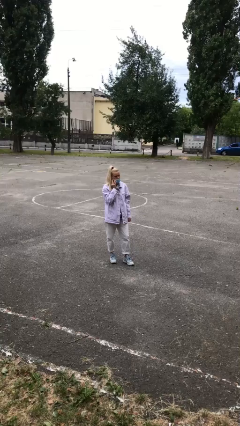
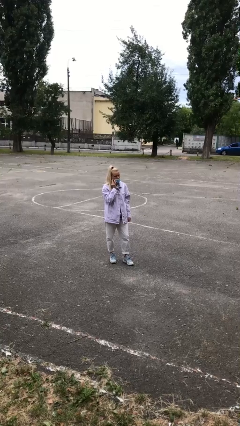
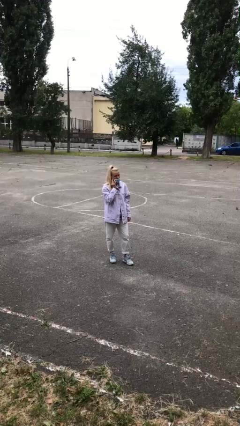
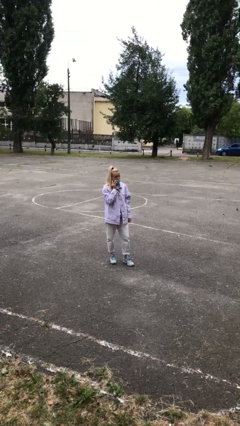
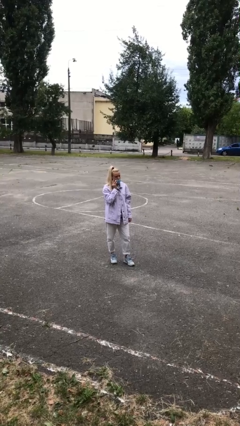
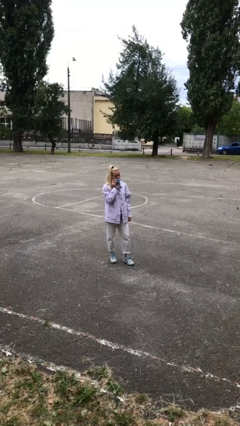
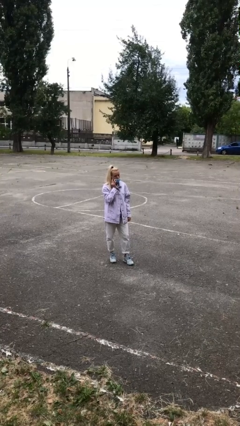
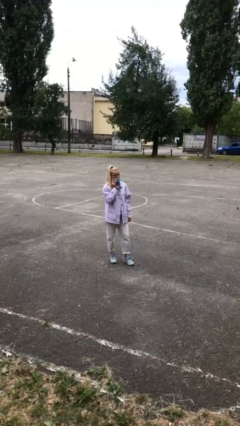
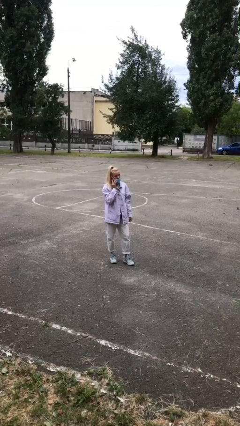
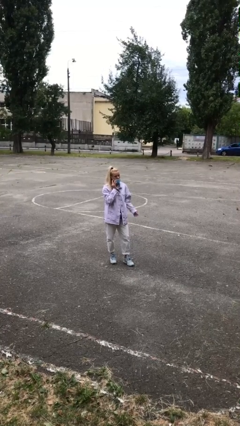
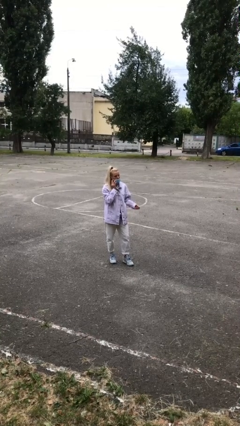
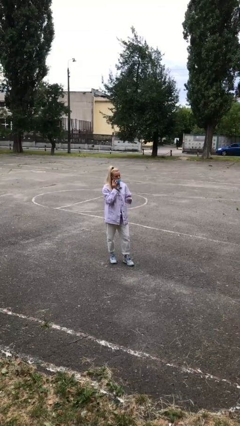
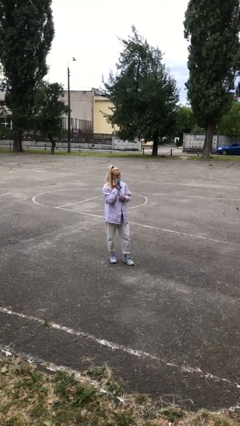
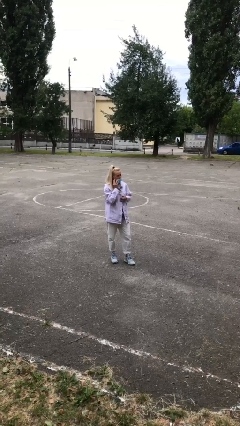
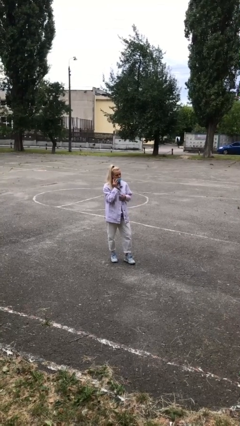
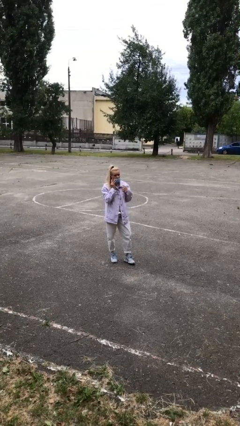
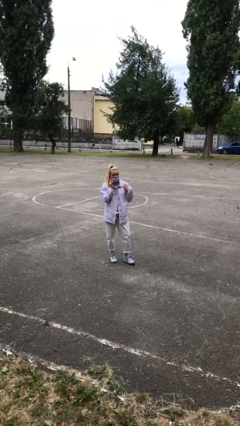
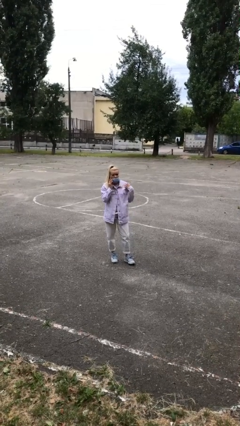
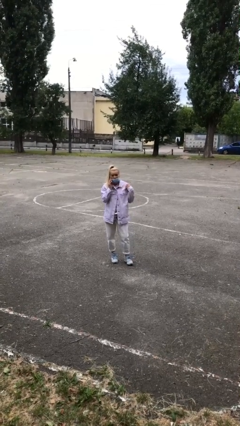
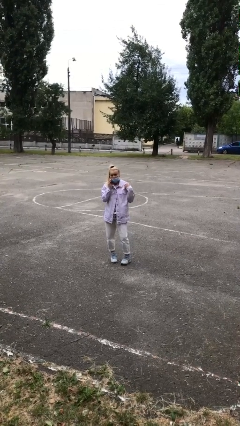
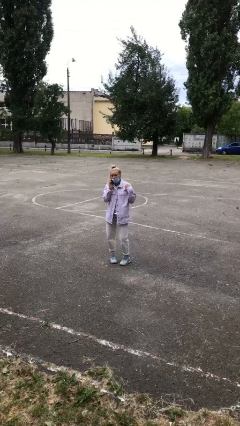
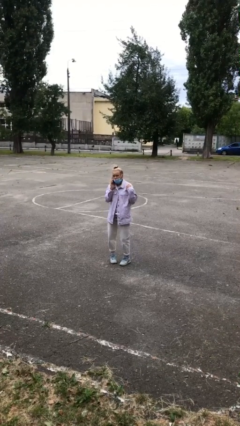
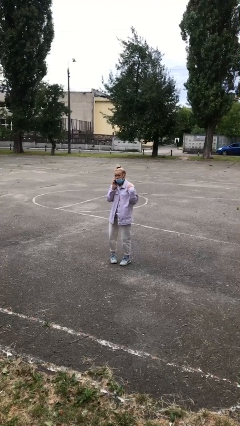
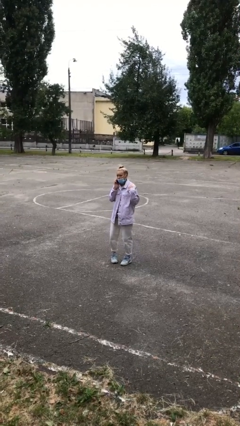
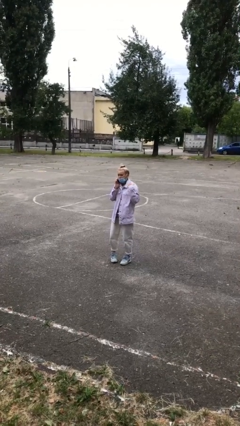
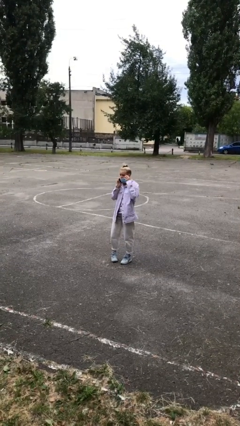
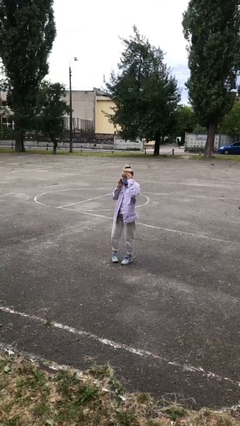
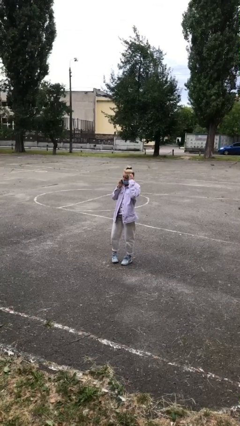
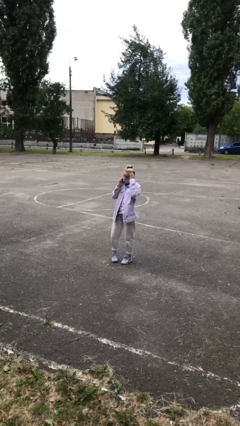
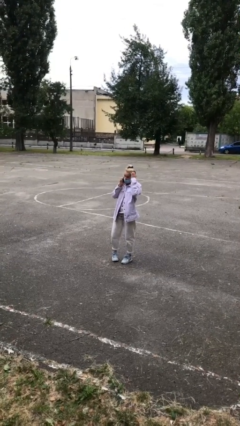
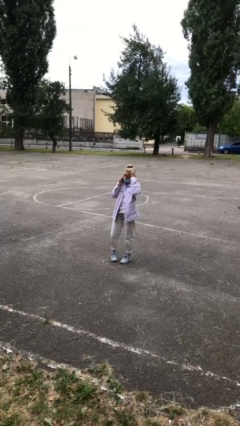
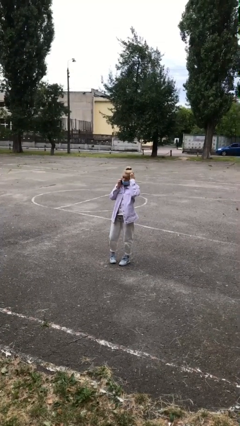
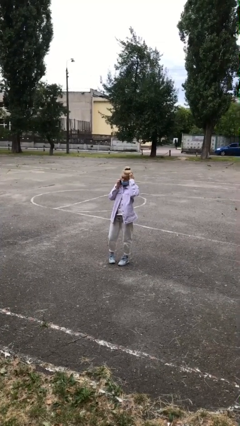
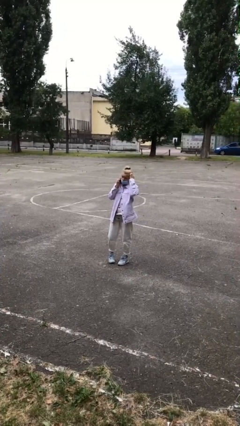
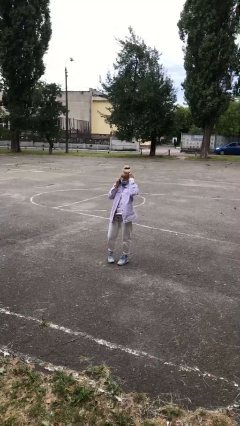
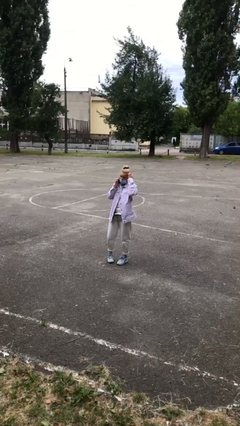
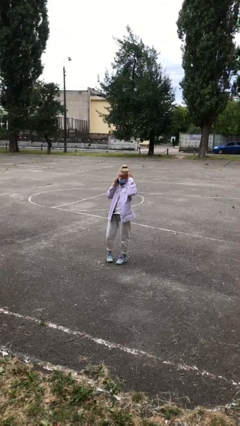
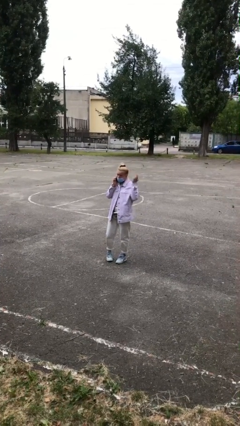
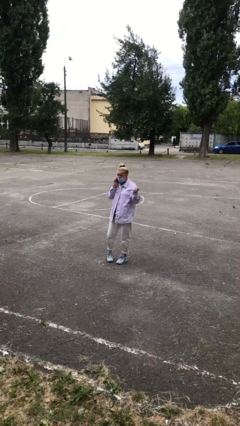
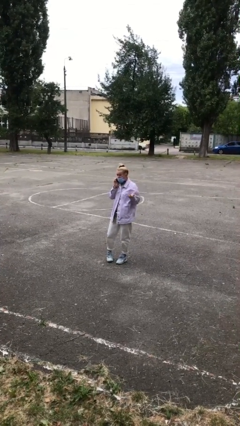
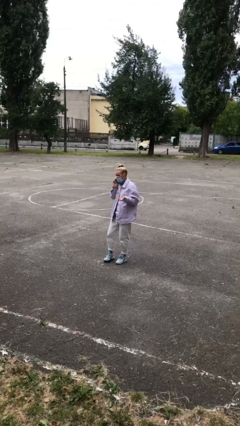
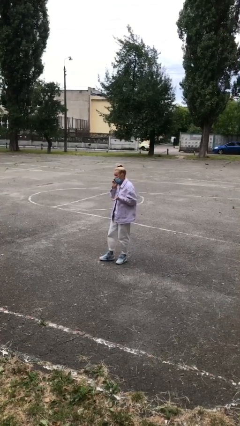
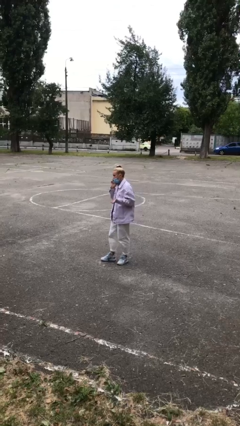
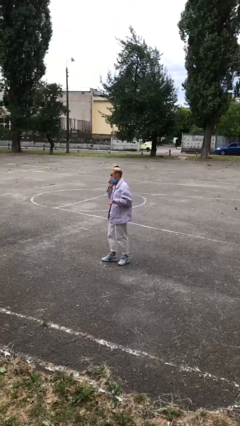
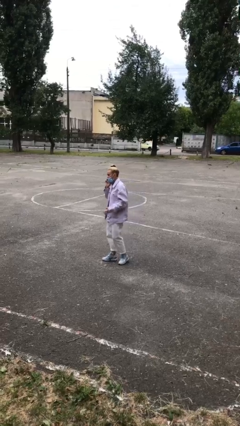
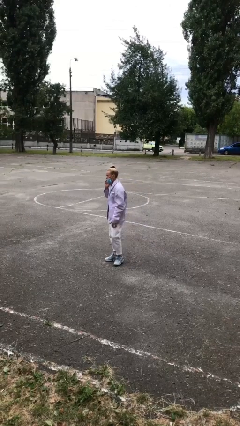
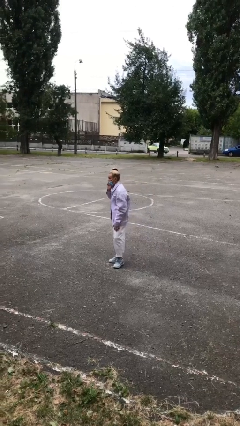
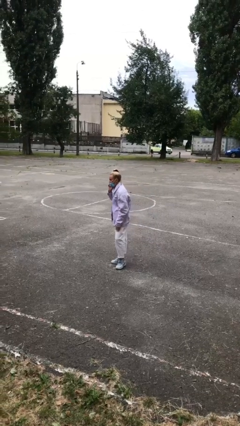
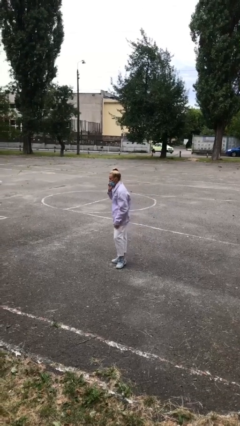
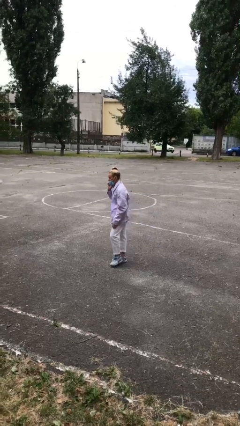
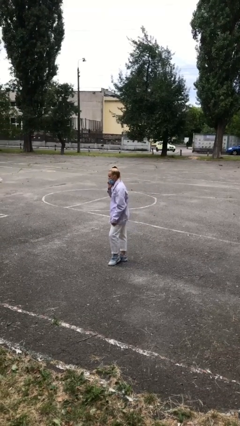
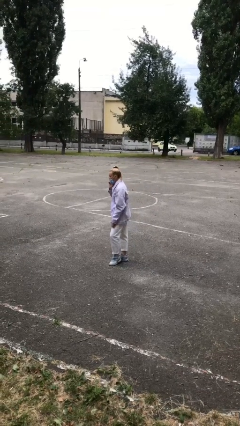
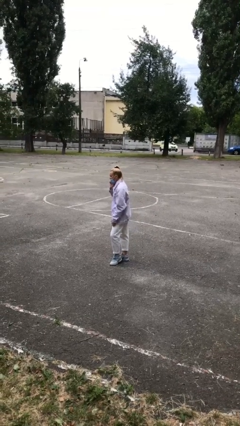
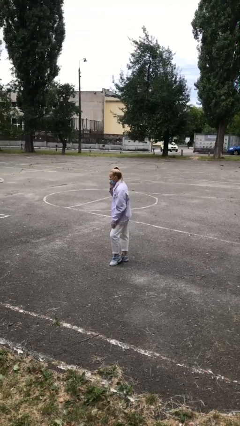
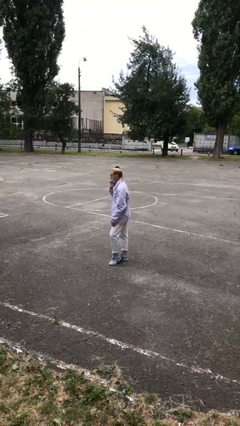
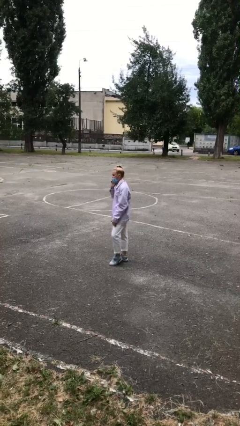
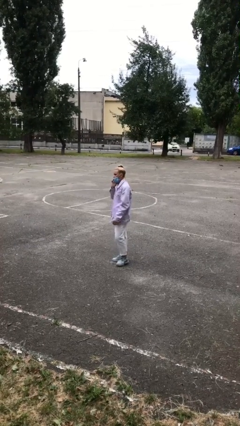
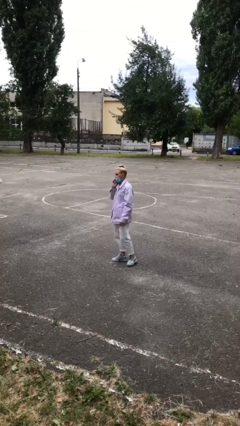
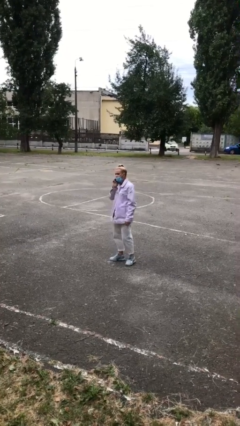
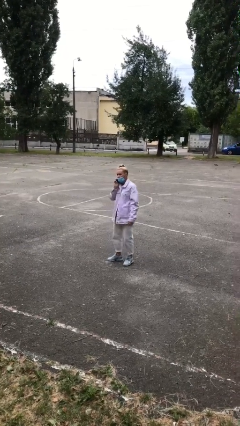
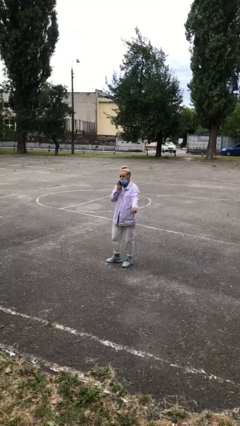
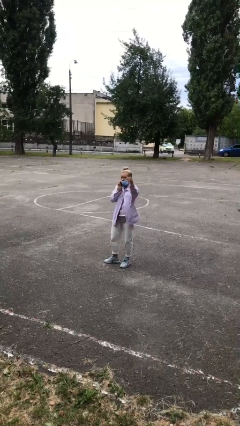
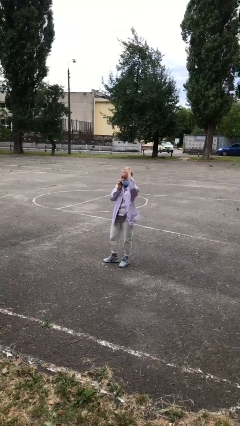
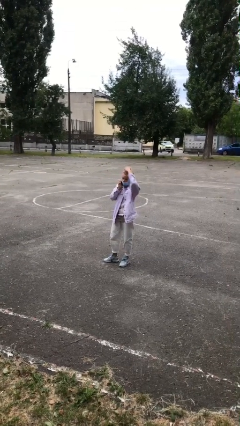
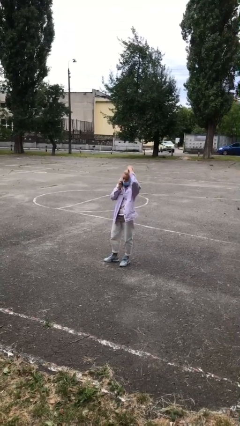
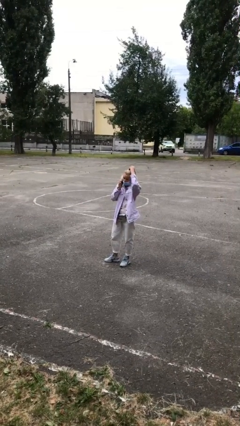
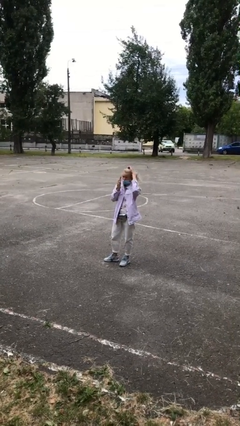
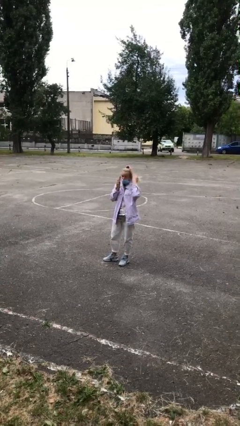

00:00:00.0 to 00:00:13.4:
person talks on phone

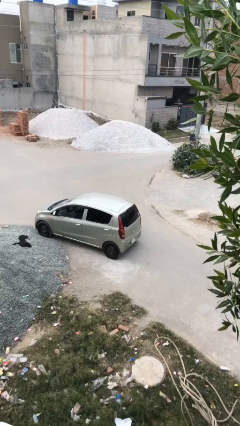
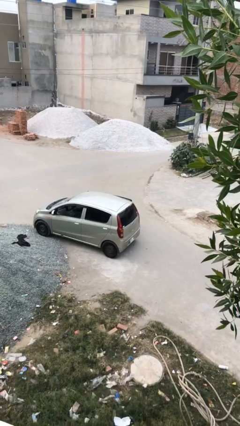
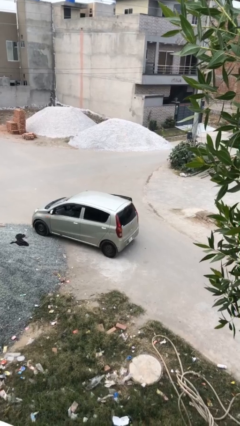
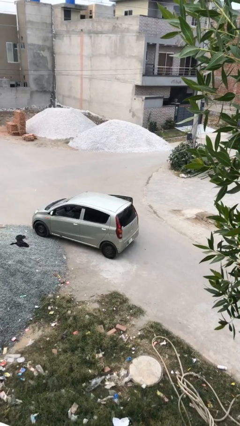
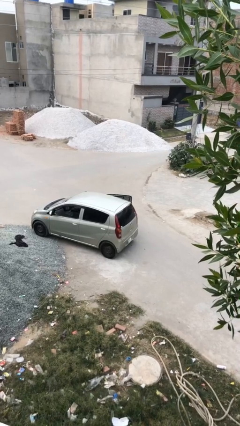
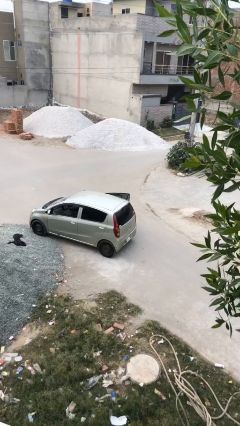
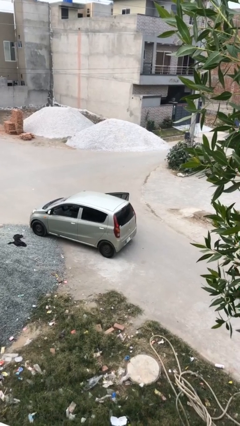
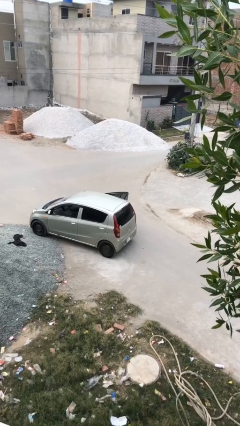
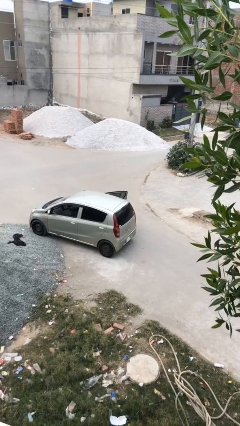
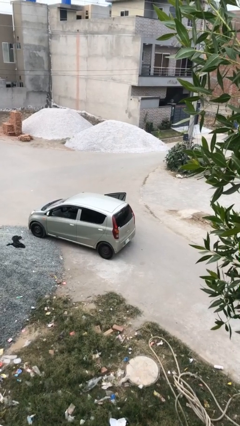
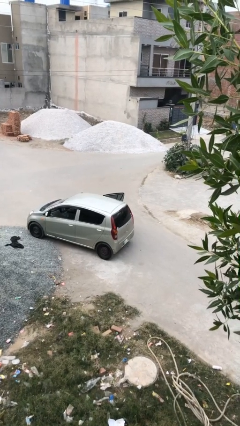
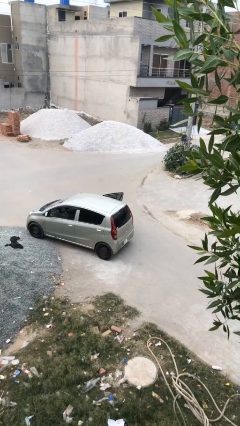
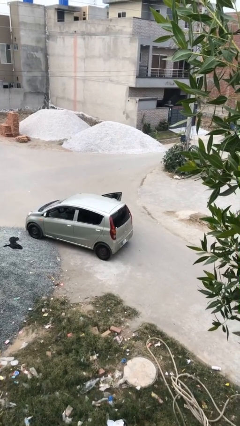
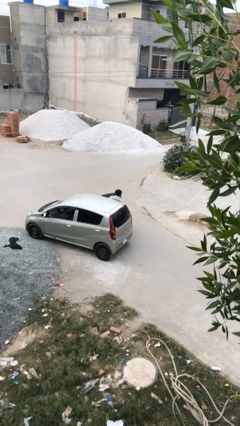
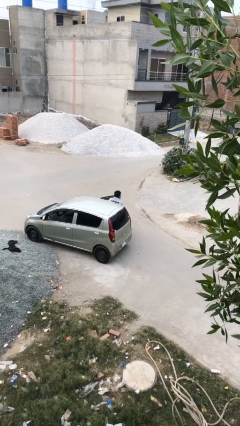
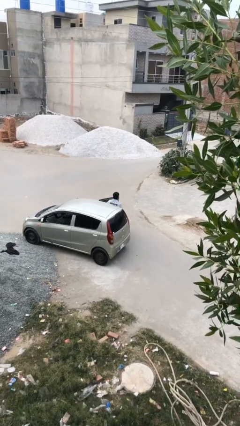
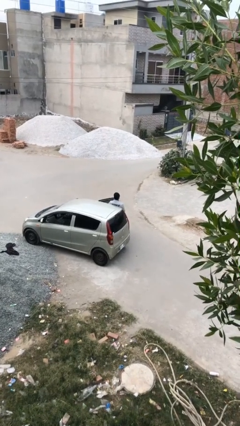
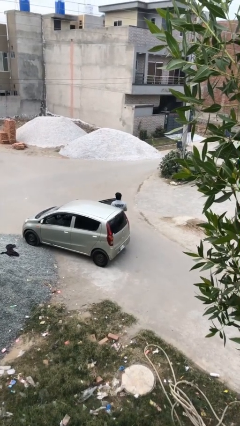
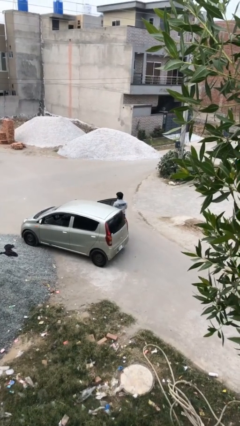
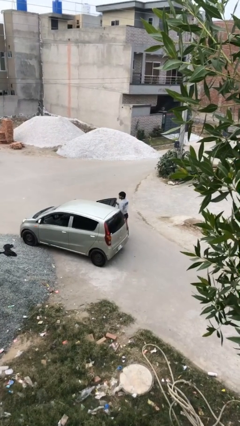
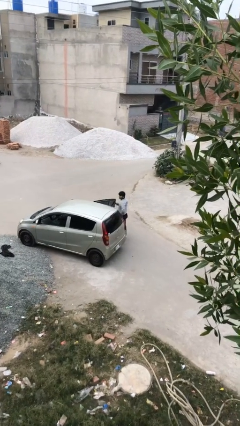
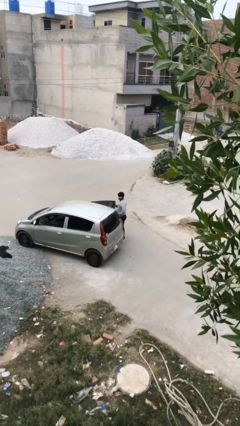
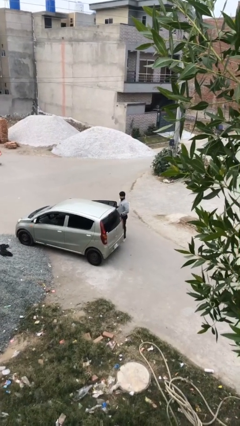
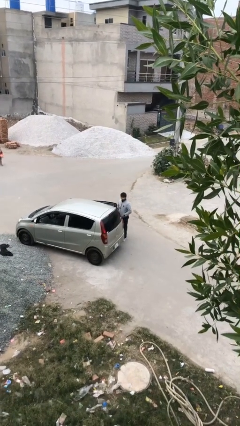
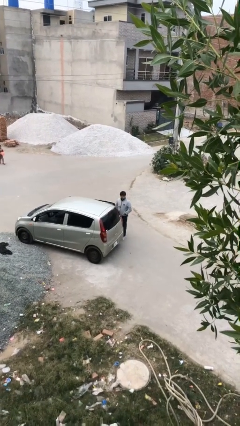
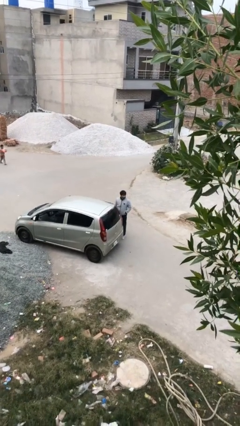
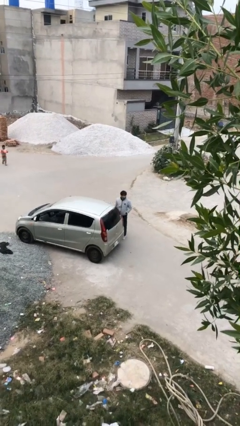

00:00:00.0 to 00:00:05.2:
car drops off person
